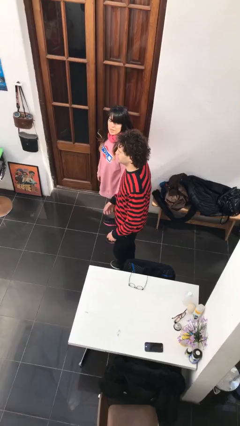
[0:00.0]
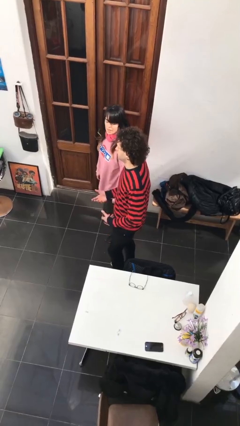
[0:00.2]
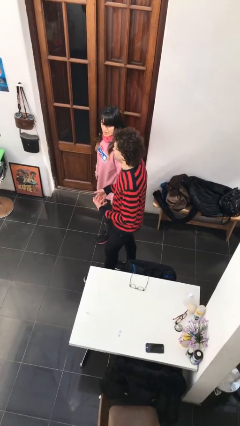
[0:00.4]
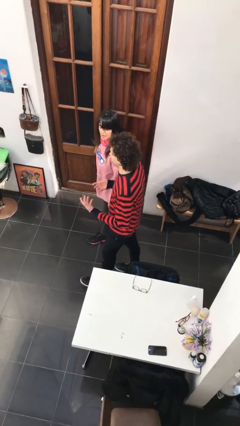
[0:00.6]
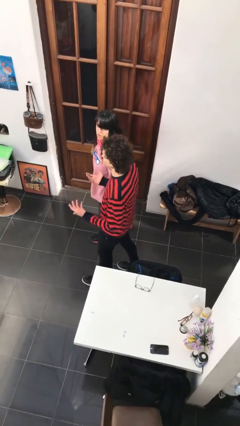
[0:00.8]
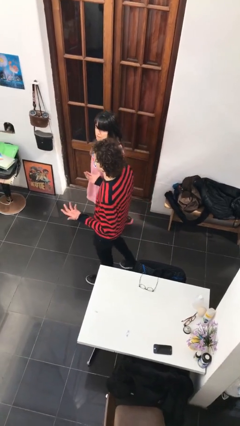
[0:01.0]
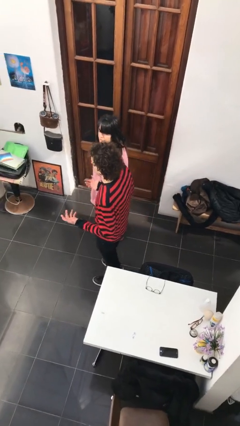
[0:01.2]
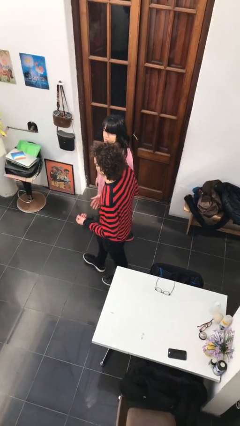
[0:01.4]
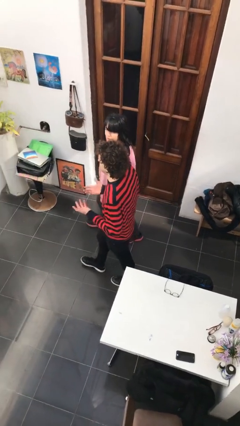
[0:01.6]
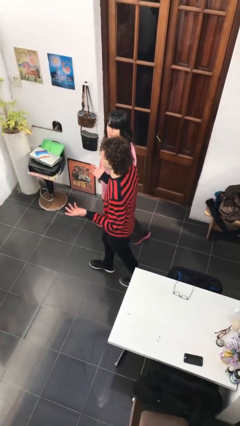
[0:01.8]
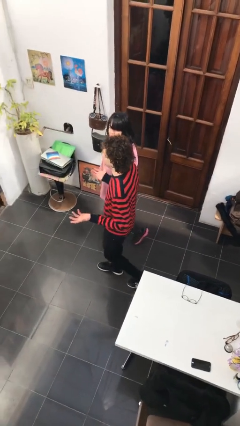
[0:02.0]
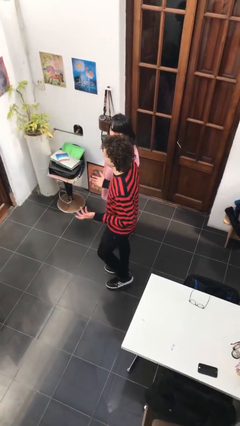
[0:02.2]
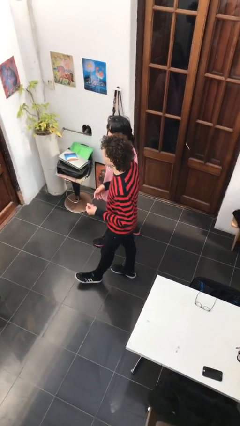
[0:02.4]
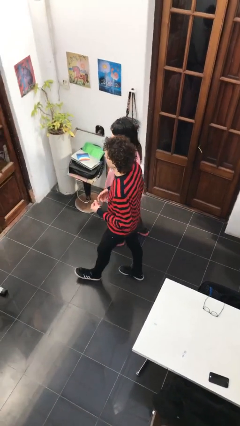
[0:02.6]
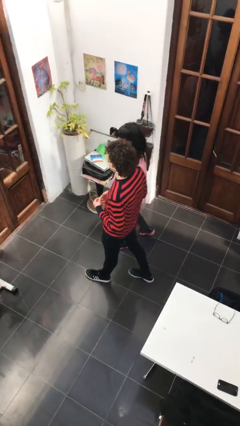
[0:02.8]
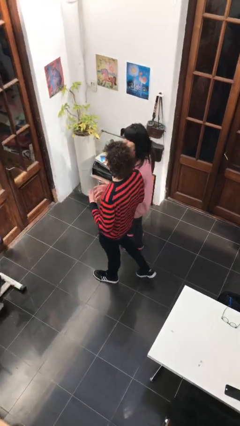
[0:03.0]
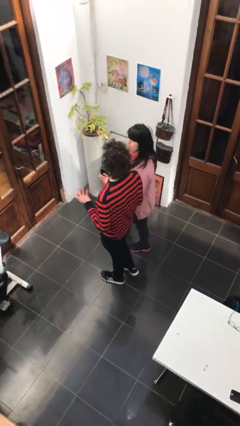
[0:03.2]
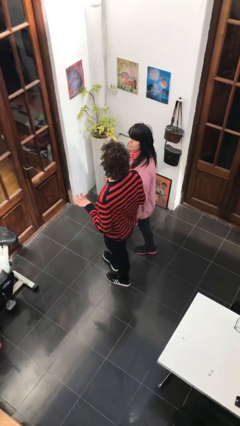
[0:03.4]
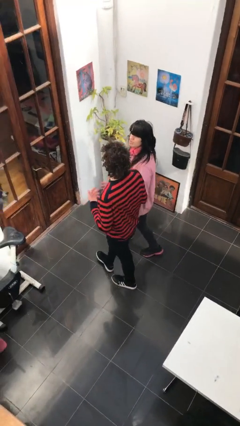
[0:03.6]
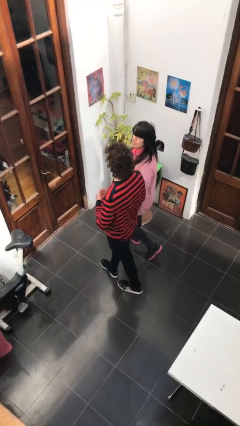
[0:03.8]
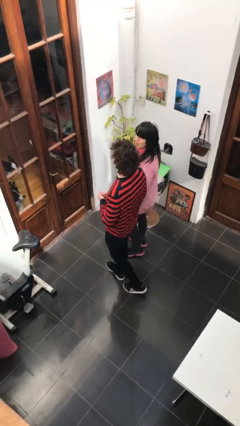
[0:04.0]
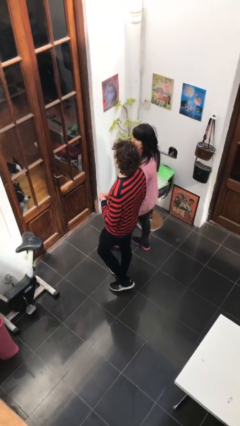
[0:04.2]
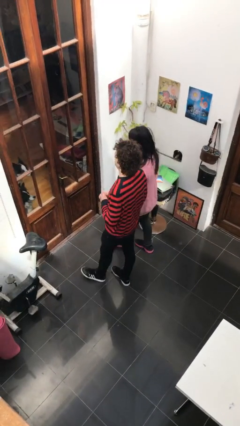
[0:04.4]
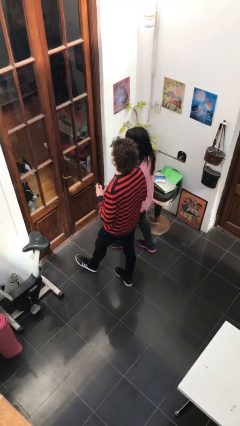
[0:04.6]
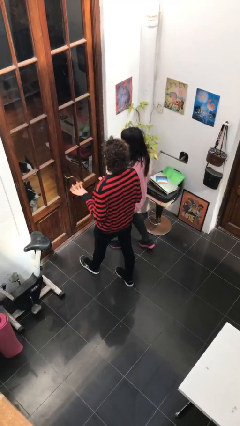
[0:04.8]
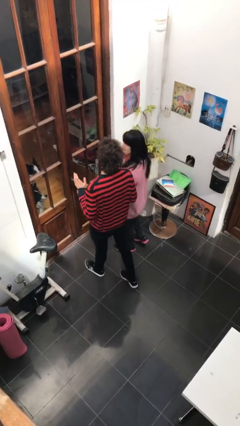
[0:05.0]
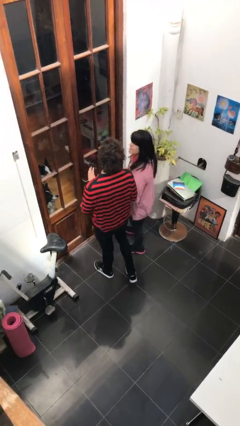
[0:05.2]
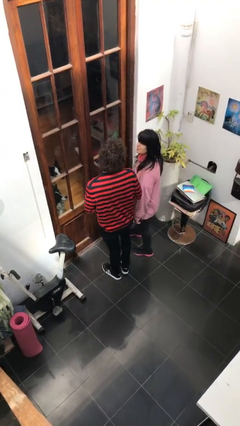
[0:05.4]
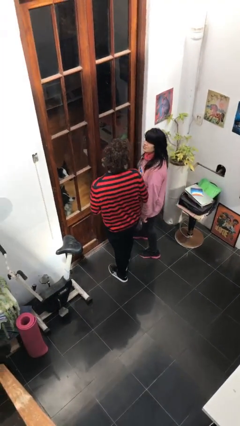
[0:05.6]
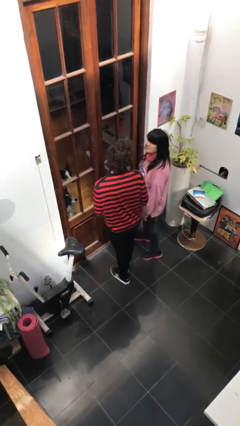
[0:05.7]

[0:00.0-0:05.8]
person talks to person

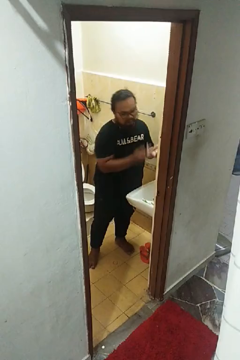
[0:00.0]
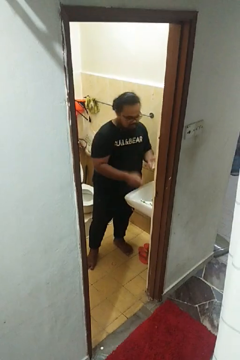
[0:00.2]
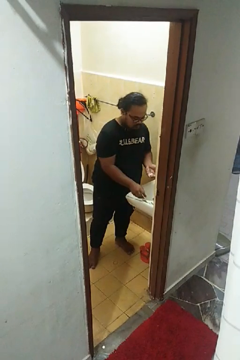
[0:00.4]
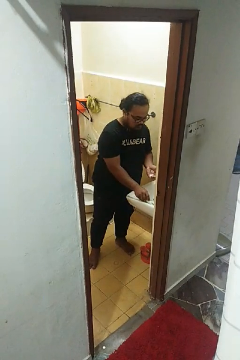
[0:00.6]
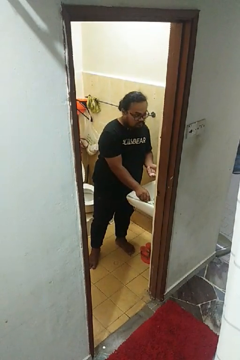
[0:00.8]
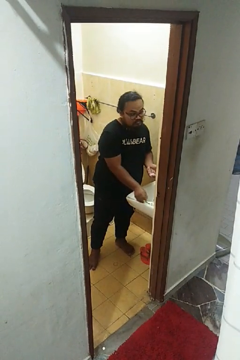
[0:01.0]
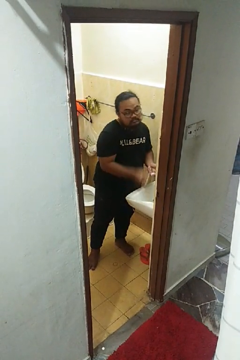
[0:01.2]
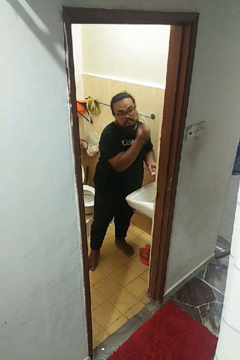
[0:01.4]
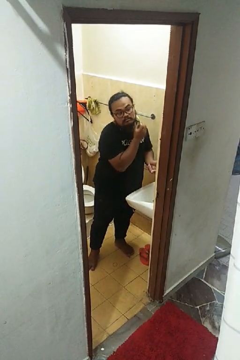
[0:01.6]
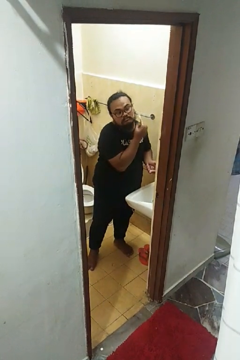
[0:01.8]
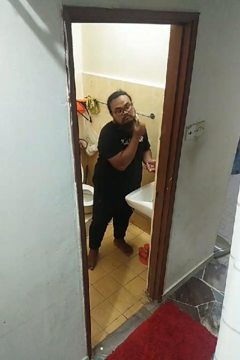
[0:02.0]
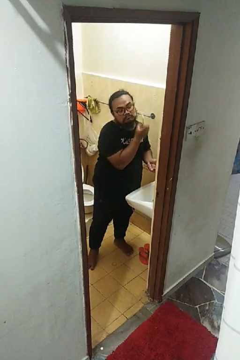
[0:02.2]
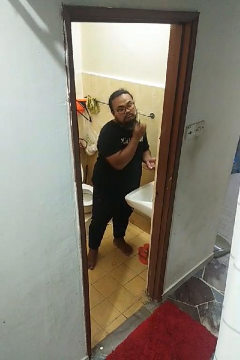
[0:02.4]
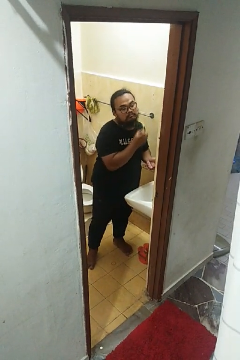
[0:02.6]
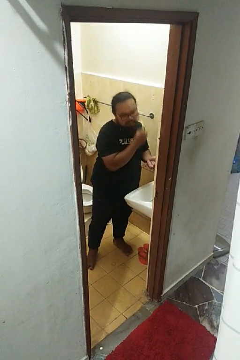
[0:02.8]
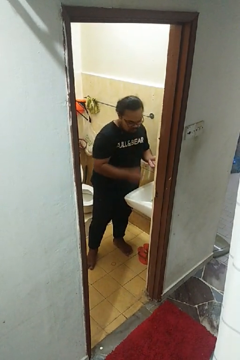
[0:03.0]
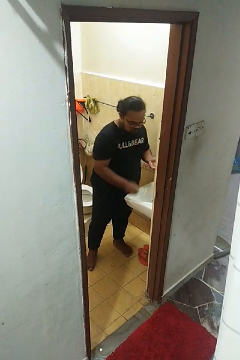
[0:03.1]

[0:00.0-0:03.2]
person shaves face

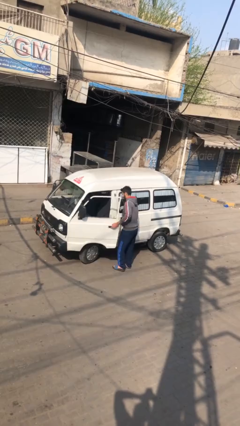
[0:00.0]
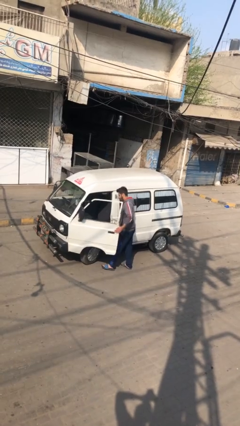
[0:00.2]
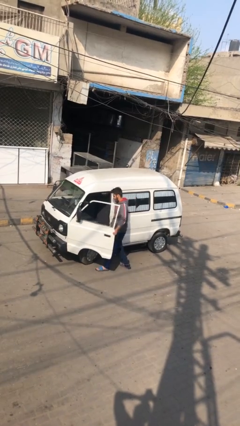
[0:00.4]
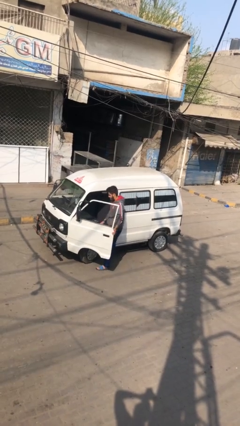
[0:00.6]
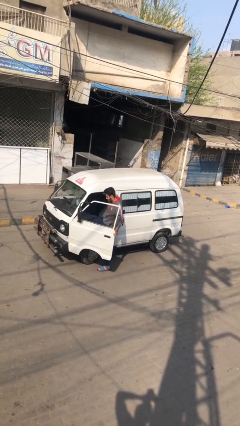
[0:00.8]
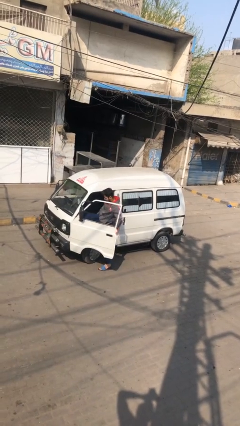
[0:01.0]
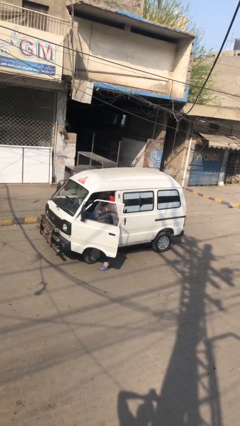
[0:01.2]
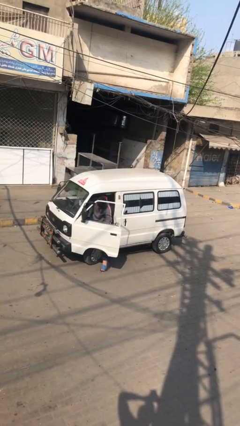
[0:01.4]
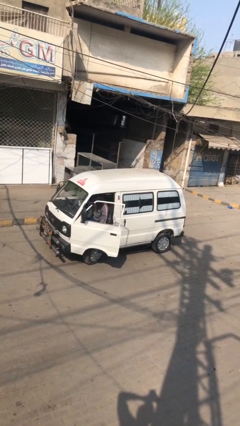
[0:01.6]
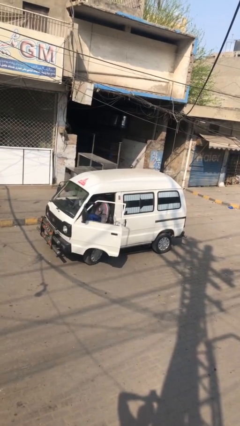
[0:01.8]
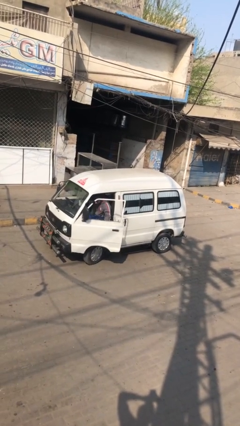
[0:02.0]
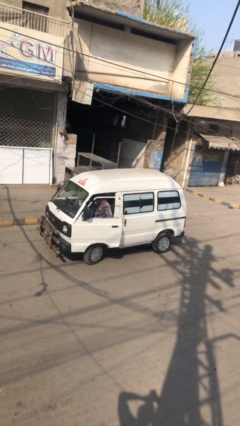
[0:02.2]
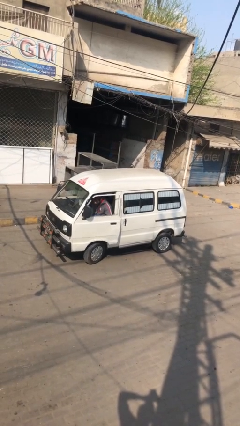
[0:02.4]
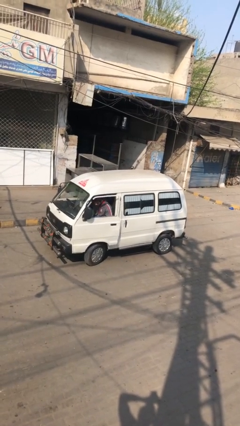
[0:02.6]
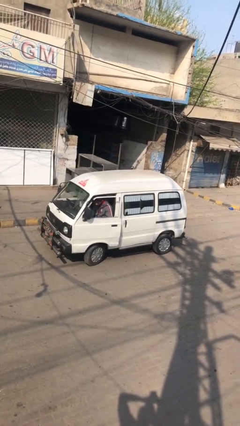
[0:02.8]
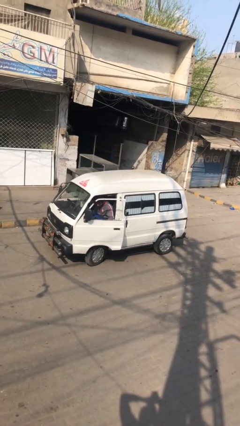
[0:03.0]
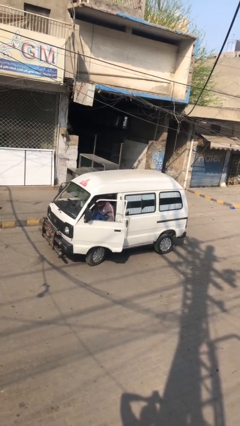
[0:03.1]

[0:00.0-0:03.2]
car picks up person

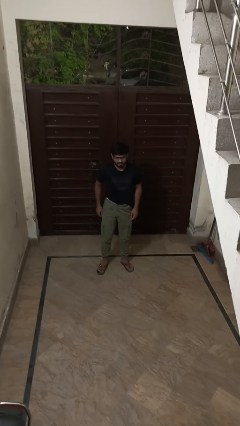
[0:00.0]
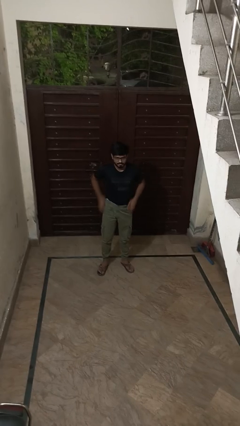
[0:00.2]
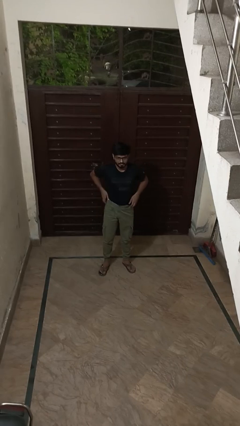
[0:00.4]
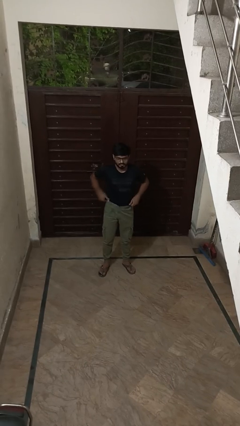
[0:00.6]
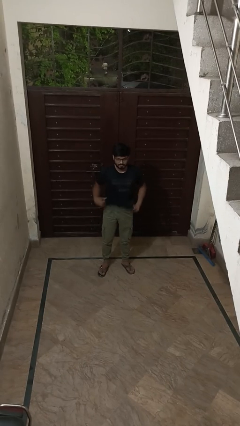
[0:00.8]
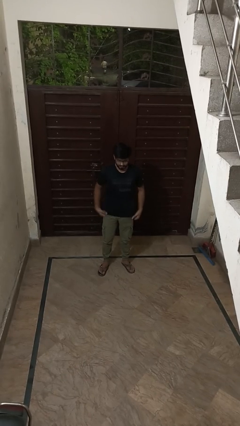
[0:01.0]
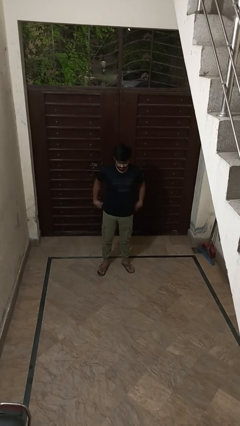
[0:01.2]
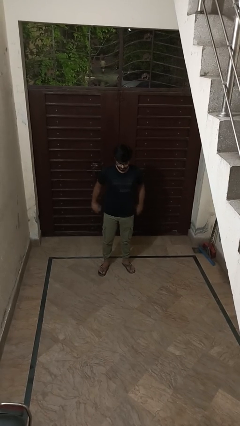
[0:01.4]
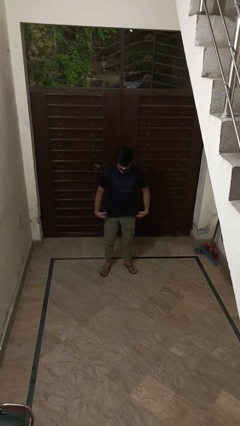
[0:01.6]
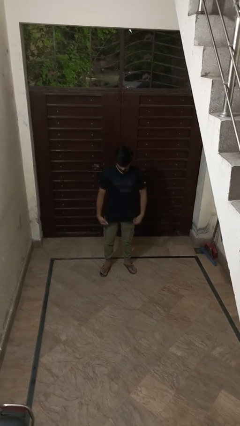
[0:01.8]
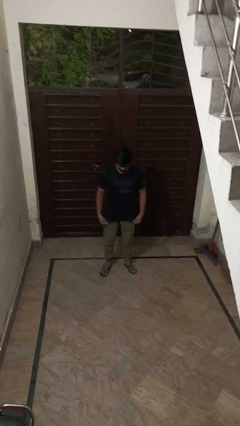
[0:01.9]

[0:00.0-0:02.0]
person untucks shirt

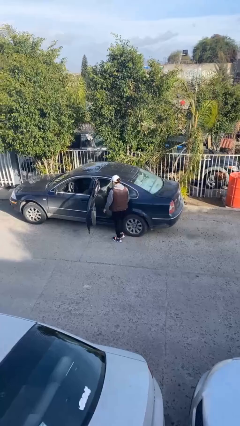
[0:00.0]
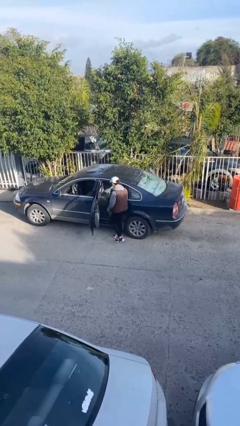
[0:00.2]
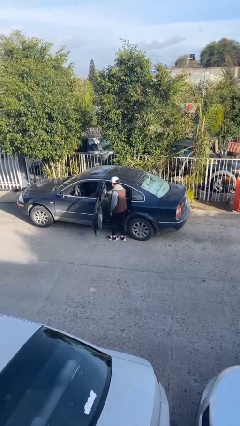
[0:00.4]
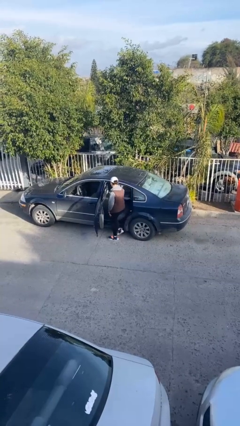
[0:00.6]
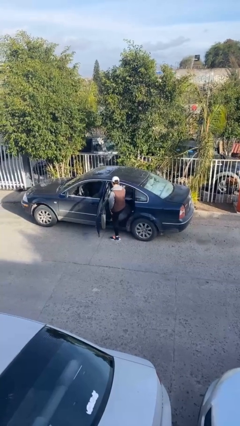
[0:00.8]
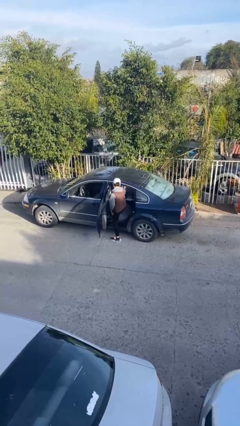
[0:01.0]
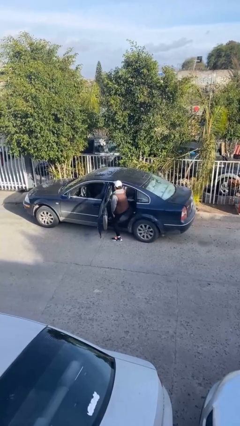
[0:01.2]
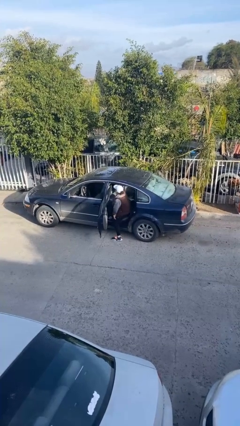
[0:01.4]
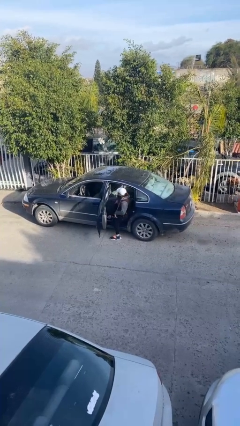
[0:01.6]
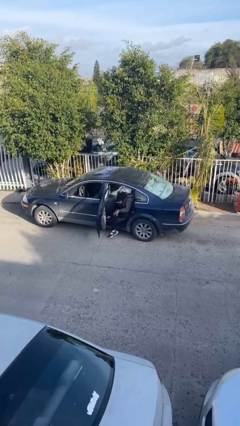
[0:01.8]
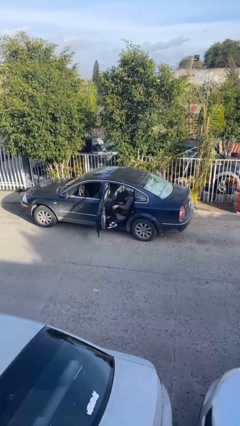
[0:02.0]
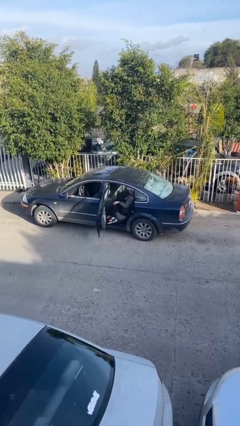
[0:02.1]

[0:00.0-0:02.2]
person enters car

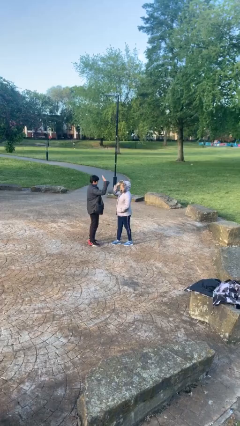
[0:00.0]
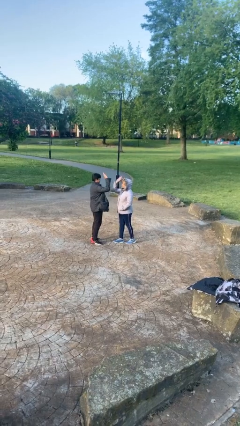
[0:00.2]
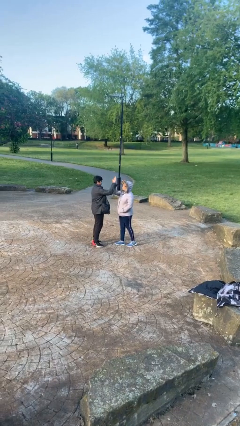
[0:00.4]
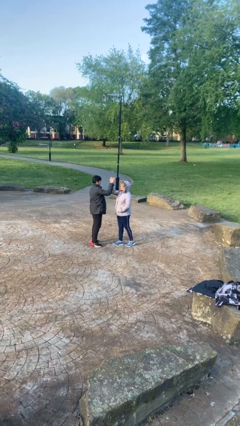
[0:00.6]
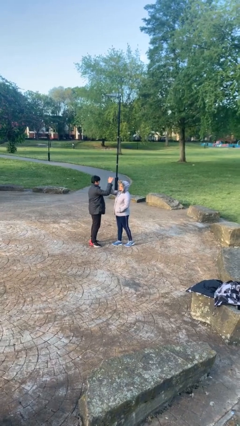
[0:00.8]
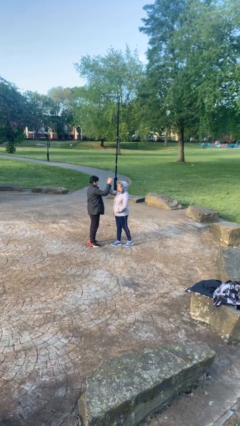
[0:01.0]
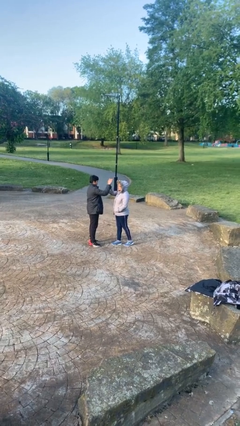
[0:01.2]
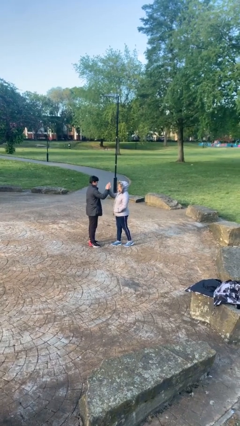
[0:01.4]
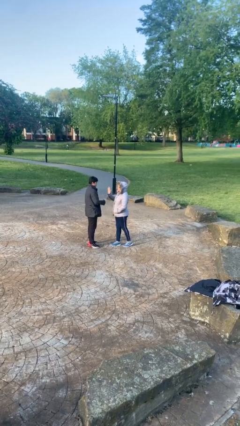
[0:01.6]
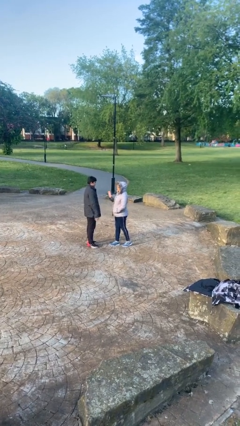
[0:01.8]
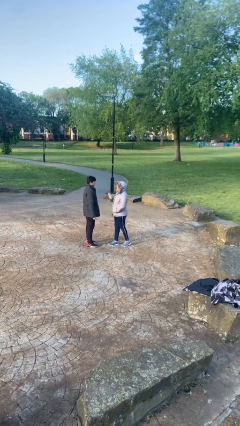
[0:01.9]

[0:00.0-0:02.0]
person highfives hand
